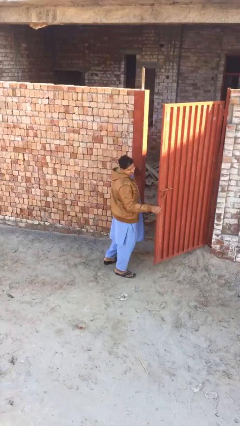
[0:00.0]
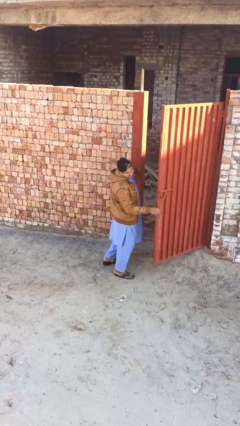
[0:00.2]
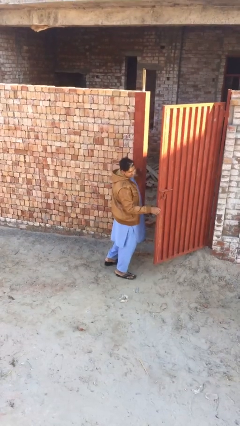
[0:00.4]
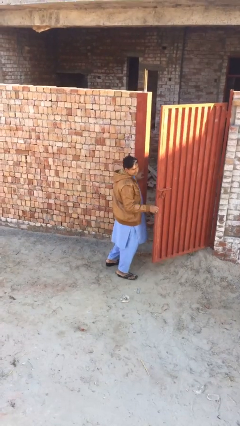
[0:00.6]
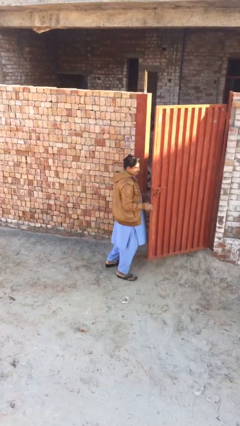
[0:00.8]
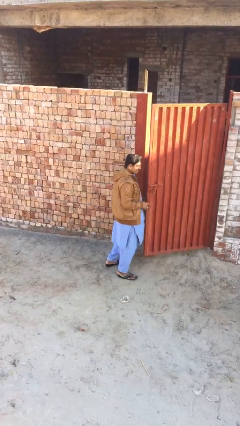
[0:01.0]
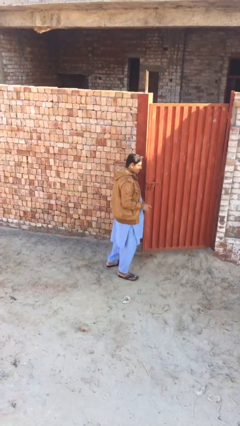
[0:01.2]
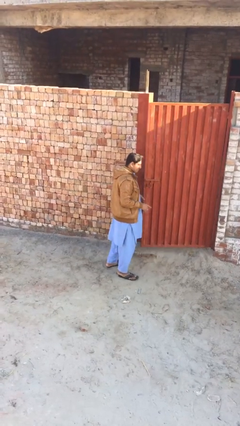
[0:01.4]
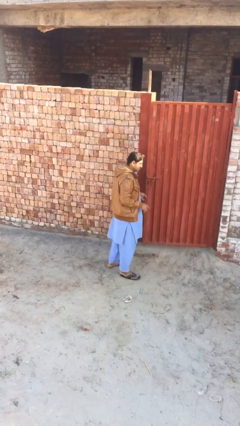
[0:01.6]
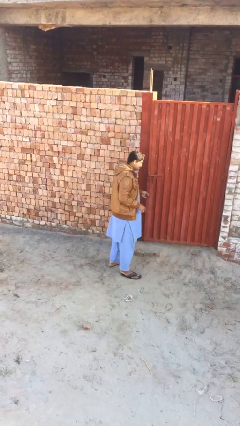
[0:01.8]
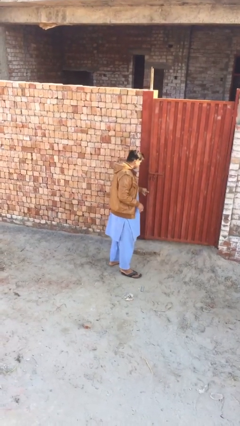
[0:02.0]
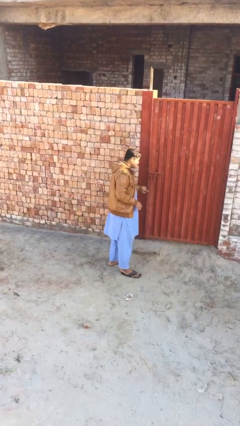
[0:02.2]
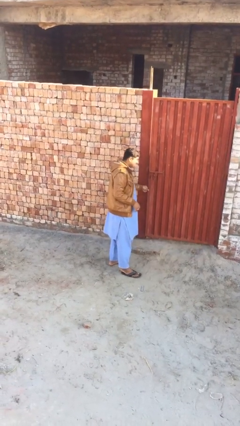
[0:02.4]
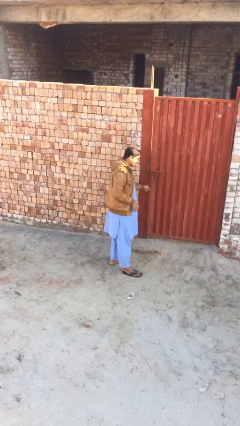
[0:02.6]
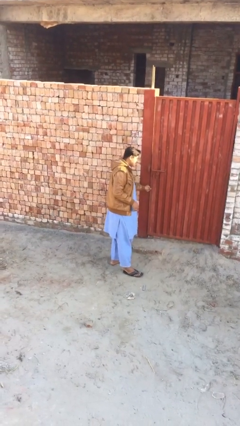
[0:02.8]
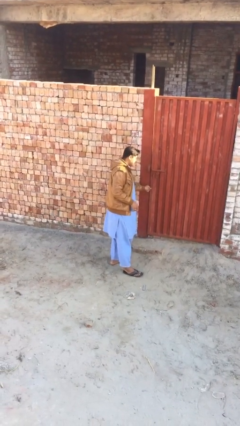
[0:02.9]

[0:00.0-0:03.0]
person closes facility door

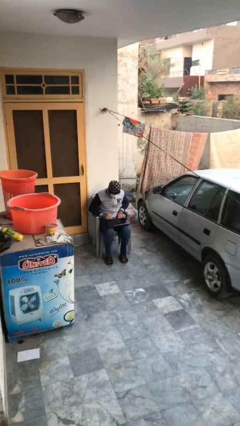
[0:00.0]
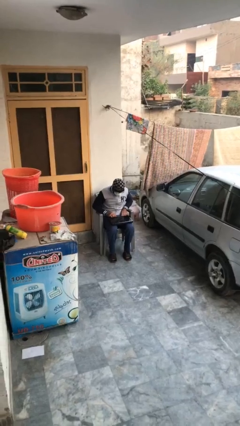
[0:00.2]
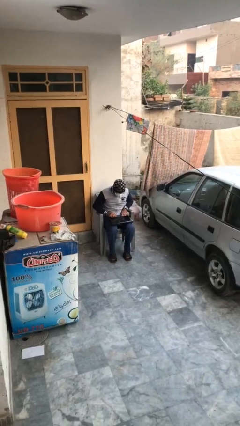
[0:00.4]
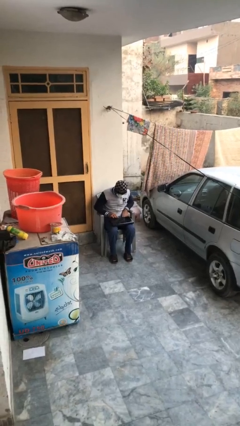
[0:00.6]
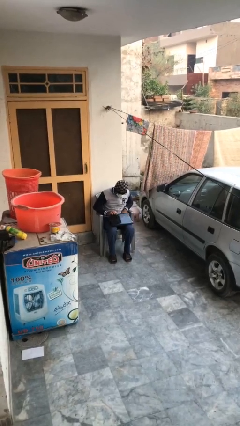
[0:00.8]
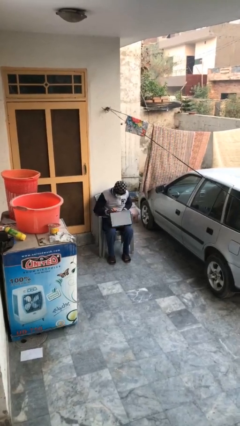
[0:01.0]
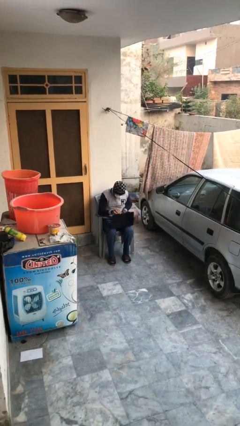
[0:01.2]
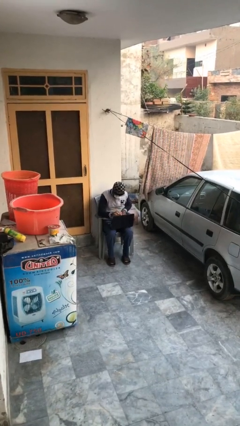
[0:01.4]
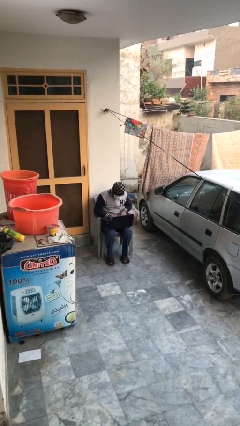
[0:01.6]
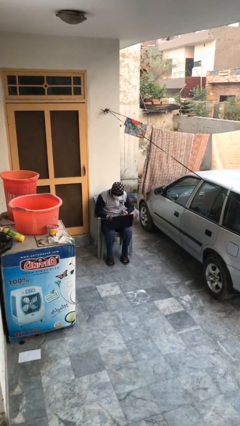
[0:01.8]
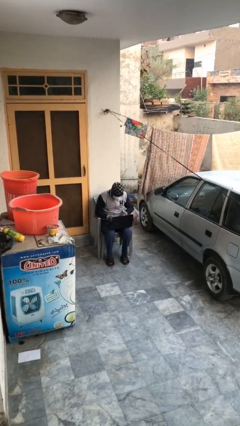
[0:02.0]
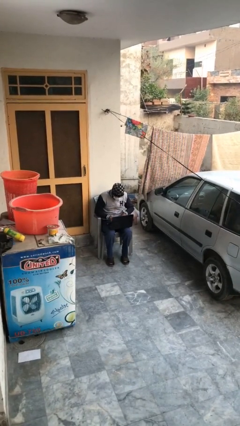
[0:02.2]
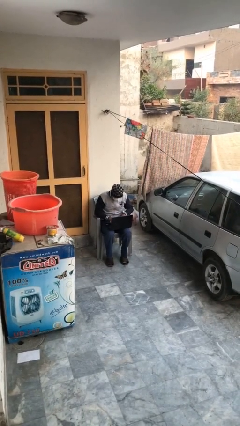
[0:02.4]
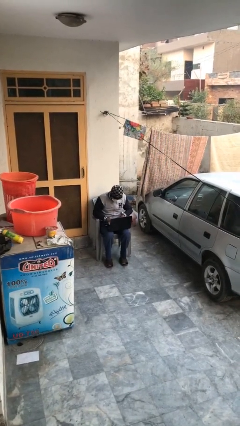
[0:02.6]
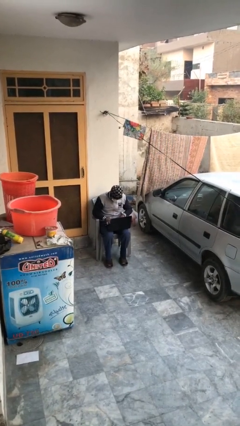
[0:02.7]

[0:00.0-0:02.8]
person interacts with laptop

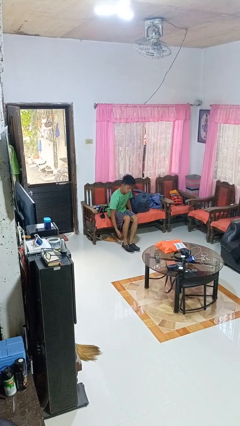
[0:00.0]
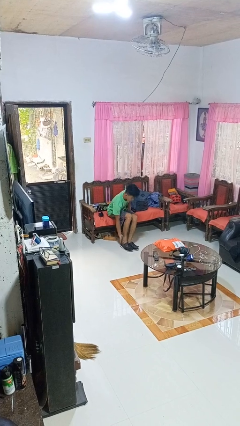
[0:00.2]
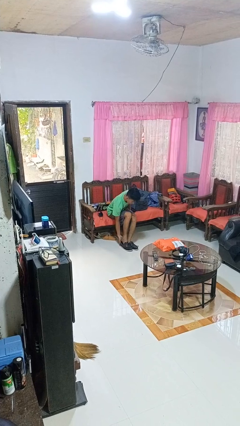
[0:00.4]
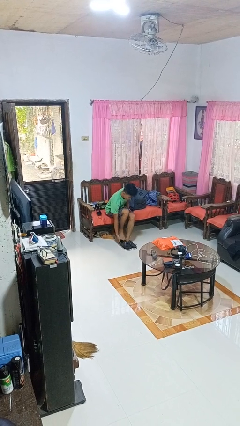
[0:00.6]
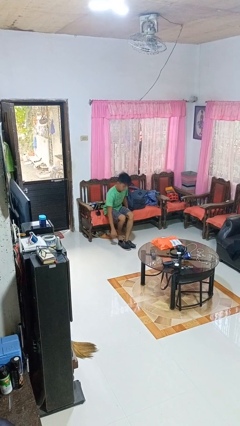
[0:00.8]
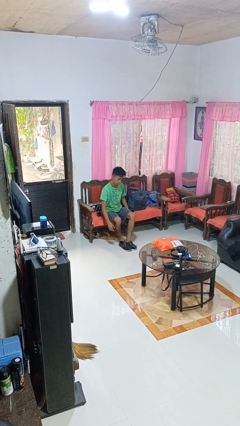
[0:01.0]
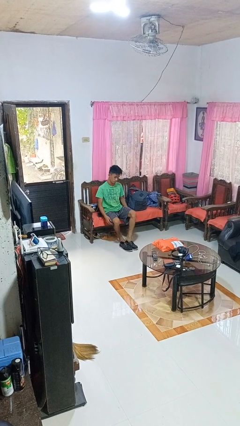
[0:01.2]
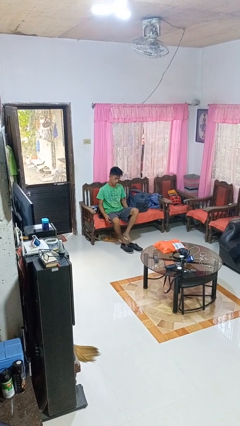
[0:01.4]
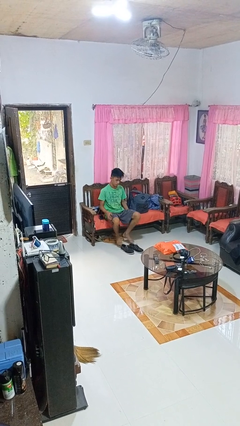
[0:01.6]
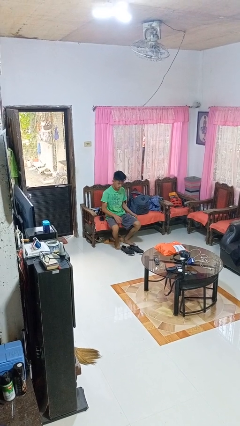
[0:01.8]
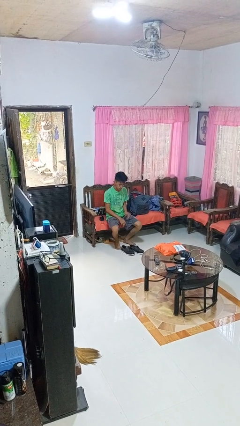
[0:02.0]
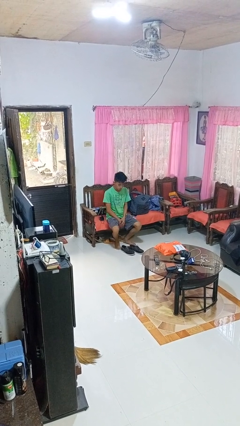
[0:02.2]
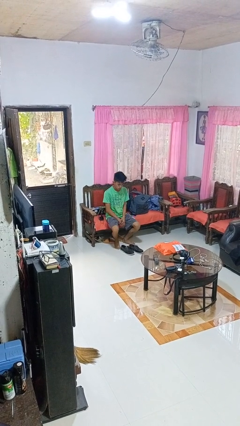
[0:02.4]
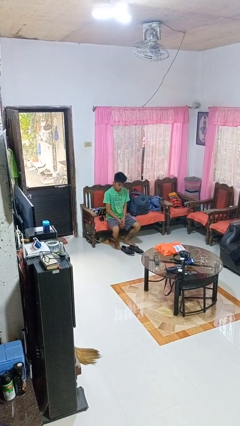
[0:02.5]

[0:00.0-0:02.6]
person takes off shoes

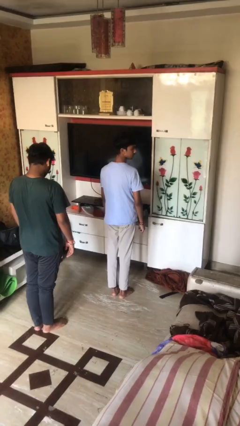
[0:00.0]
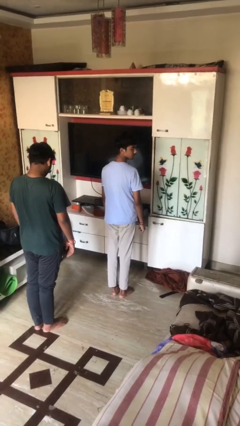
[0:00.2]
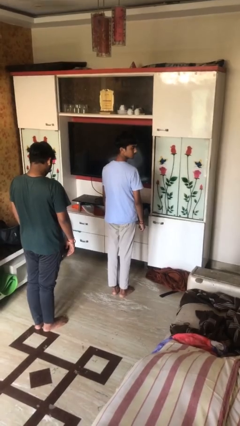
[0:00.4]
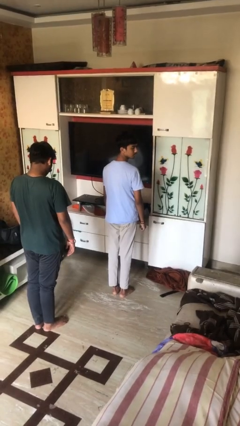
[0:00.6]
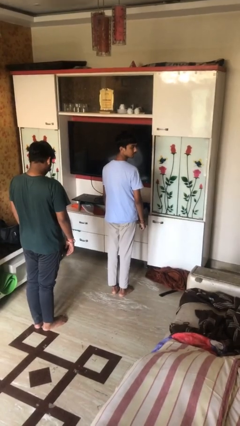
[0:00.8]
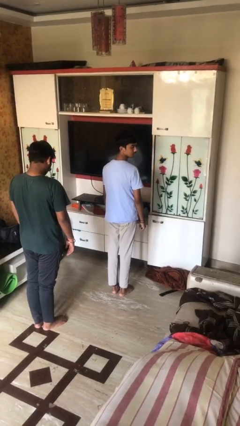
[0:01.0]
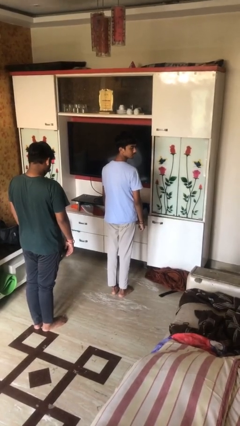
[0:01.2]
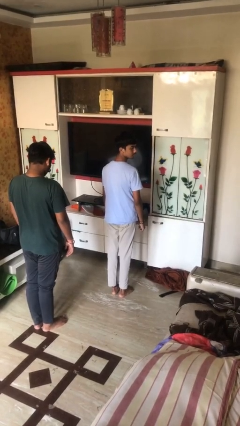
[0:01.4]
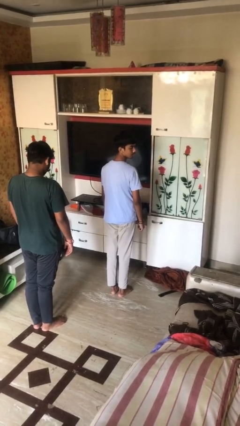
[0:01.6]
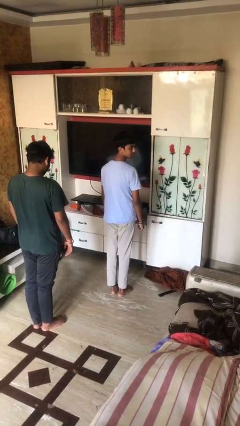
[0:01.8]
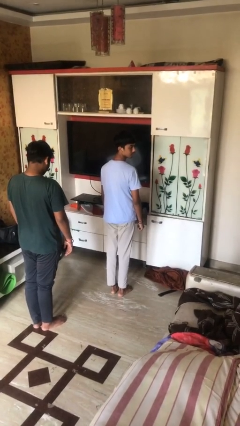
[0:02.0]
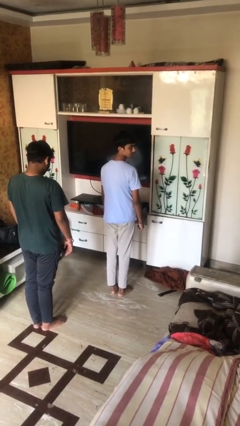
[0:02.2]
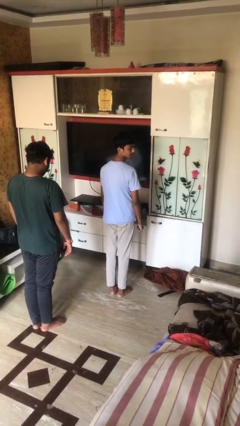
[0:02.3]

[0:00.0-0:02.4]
person looks over shoulder

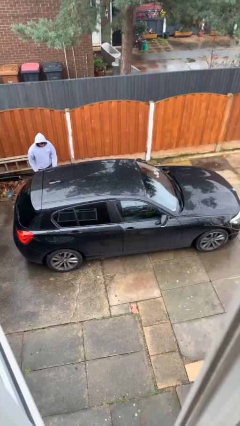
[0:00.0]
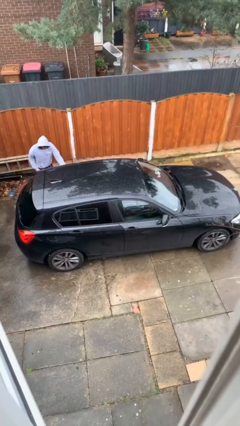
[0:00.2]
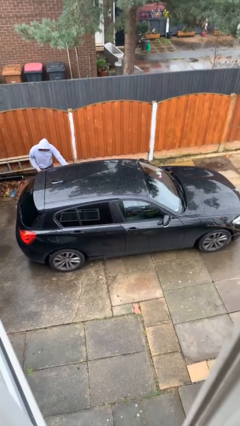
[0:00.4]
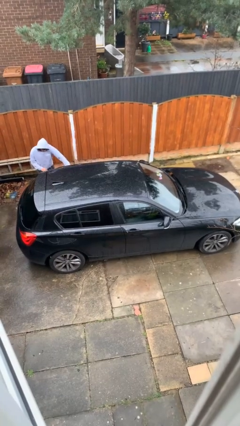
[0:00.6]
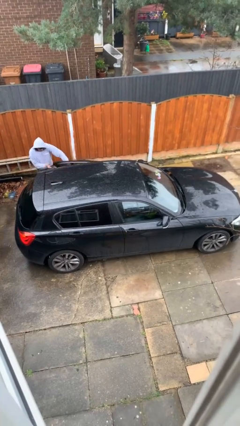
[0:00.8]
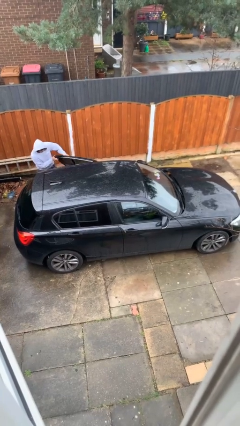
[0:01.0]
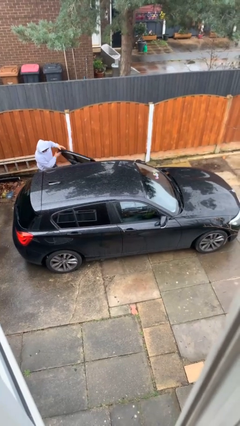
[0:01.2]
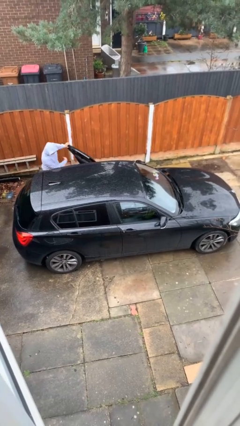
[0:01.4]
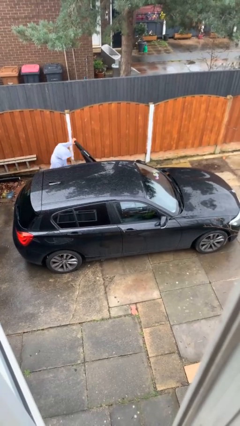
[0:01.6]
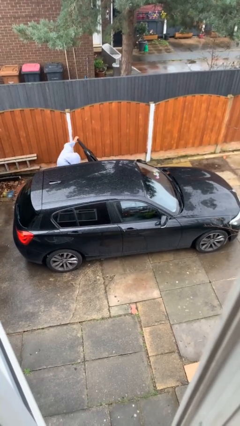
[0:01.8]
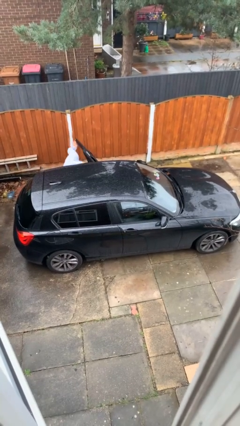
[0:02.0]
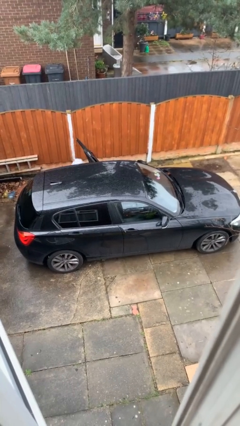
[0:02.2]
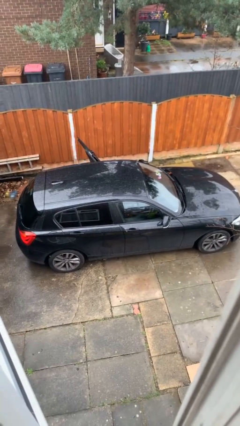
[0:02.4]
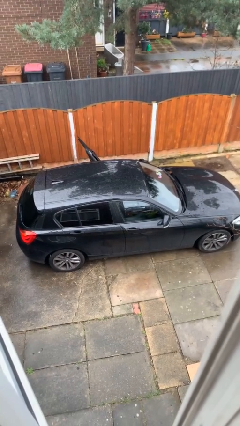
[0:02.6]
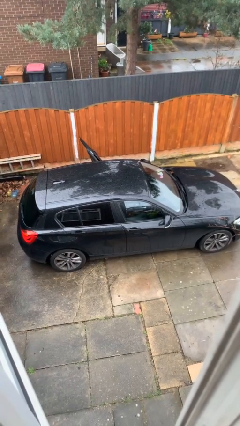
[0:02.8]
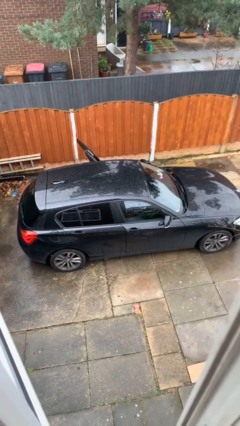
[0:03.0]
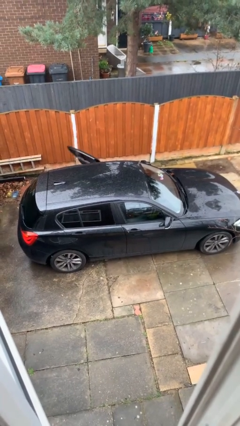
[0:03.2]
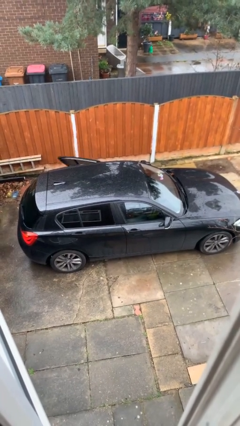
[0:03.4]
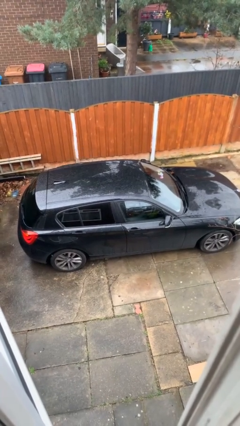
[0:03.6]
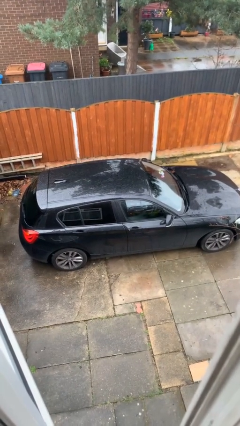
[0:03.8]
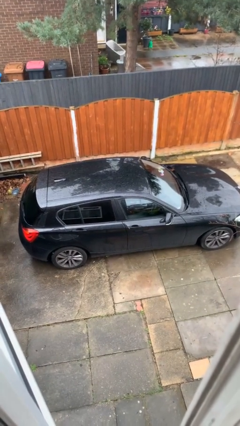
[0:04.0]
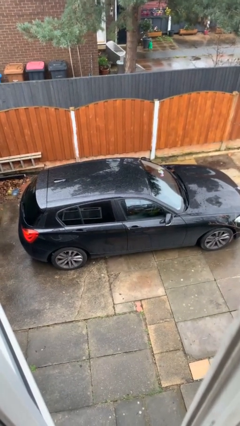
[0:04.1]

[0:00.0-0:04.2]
car picks up person

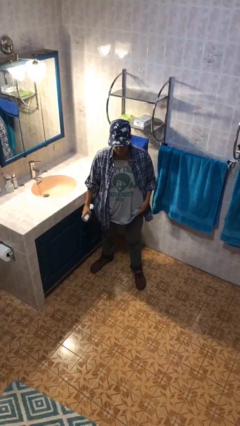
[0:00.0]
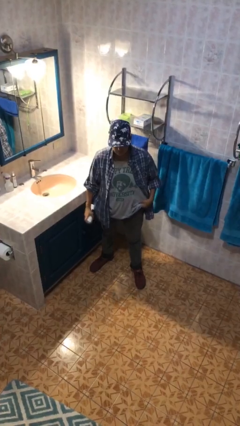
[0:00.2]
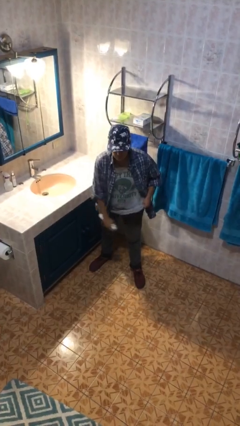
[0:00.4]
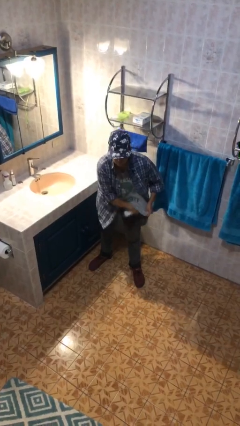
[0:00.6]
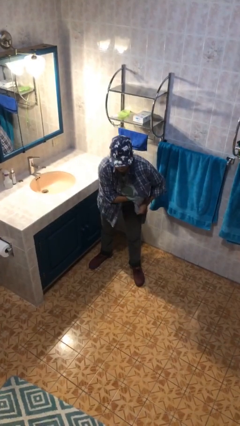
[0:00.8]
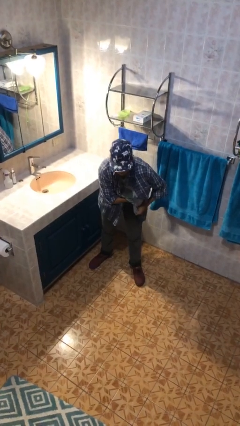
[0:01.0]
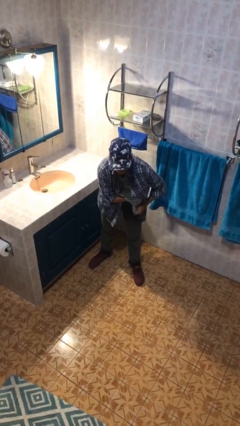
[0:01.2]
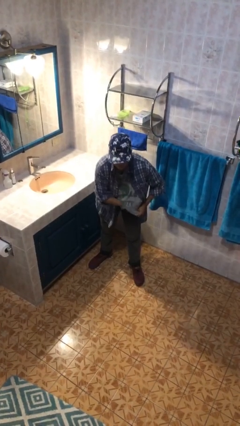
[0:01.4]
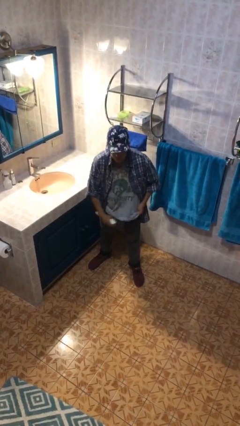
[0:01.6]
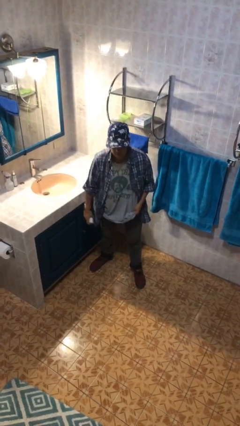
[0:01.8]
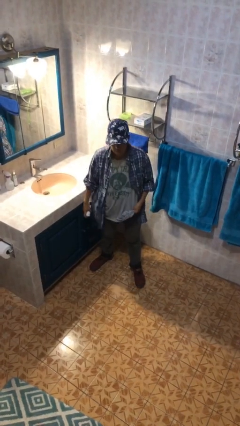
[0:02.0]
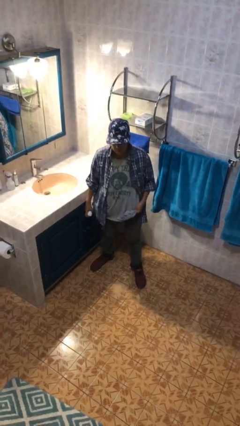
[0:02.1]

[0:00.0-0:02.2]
person applies deodorant

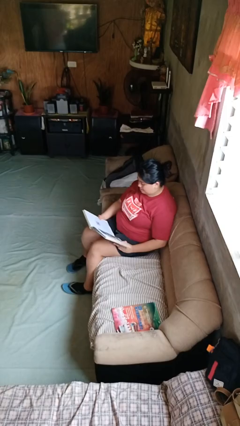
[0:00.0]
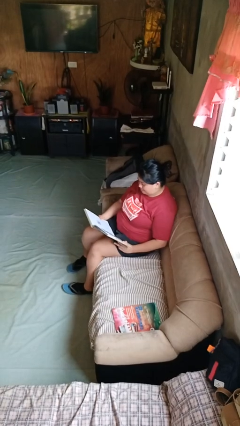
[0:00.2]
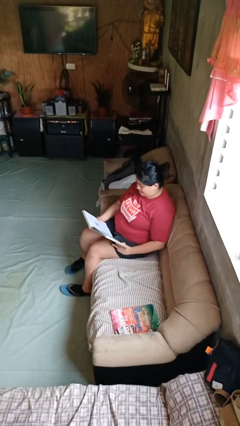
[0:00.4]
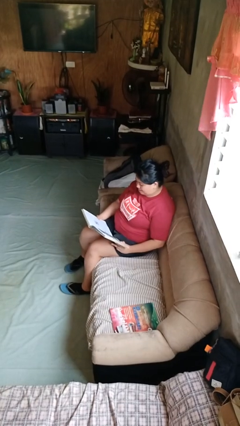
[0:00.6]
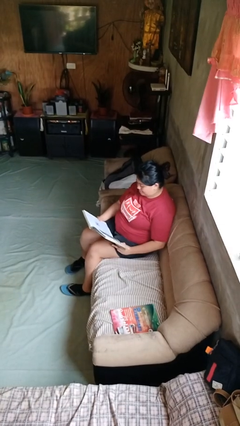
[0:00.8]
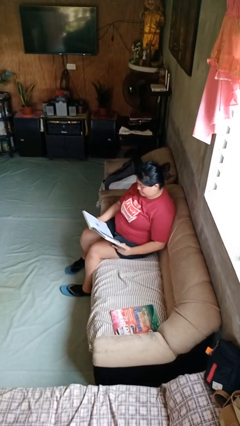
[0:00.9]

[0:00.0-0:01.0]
person reads book
